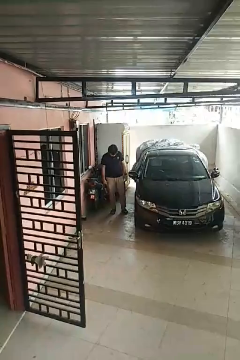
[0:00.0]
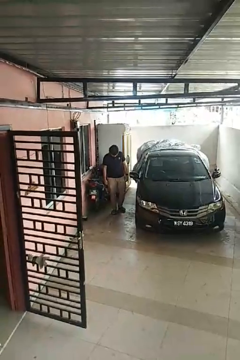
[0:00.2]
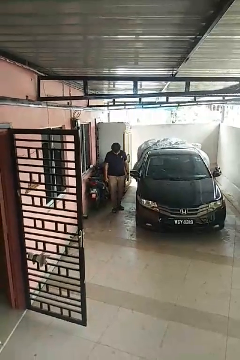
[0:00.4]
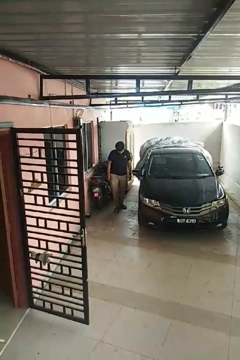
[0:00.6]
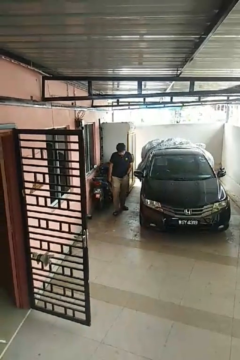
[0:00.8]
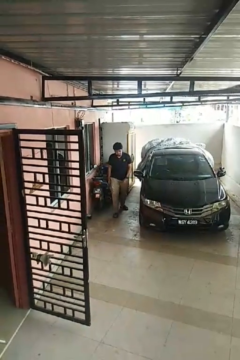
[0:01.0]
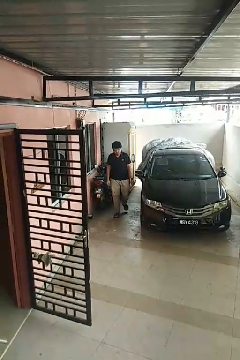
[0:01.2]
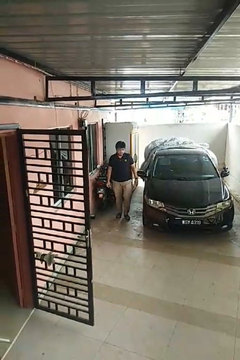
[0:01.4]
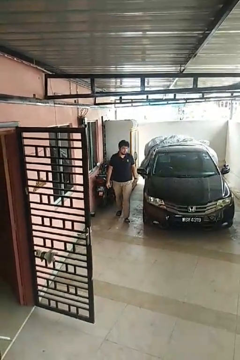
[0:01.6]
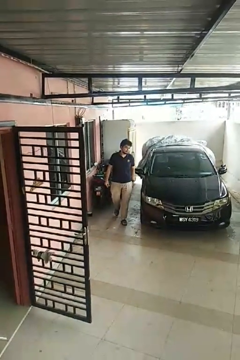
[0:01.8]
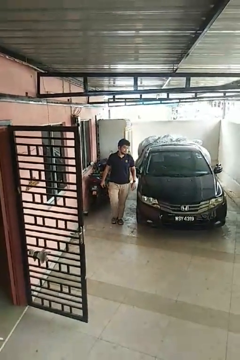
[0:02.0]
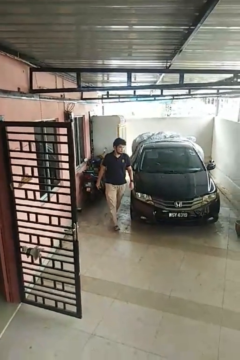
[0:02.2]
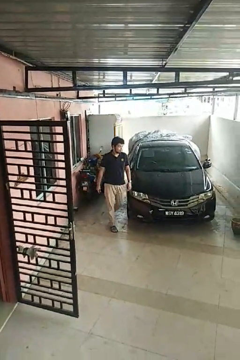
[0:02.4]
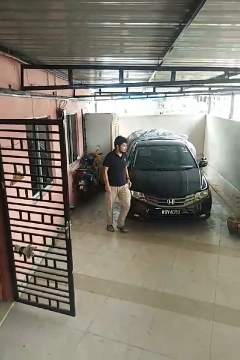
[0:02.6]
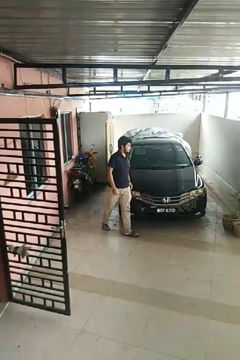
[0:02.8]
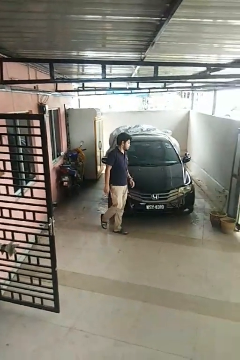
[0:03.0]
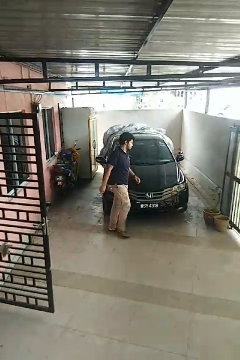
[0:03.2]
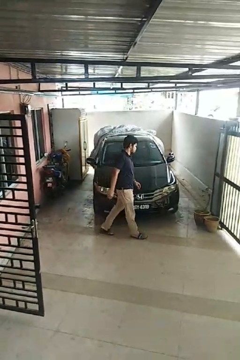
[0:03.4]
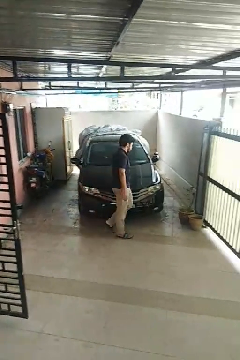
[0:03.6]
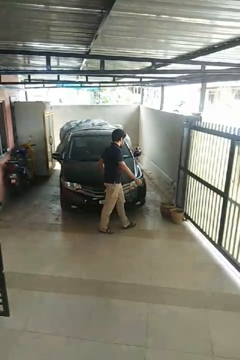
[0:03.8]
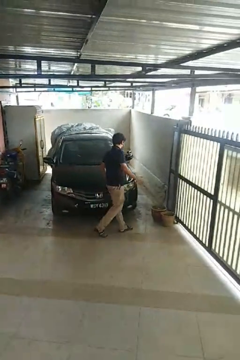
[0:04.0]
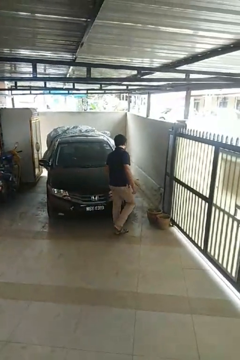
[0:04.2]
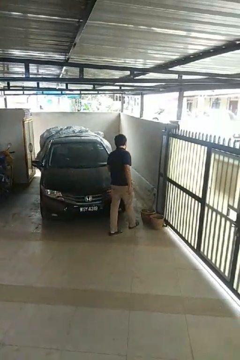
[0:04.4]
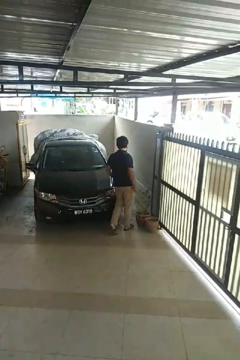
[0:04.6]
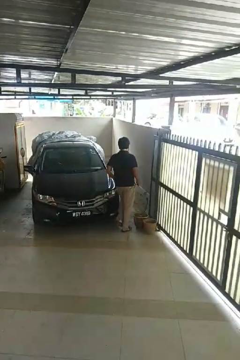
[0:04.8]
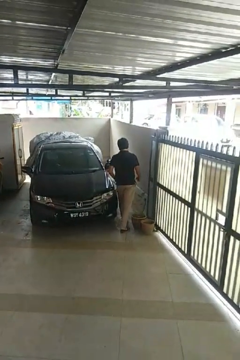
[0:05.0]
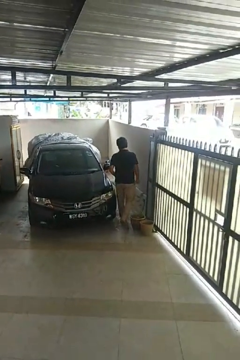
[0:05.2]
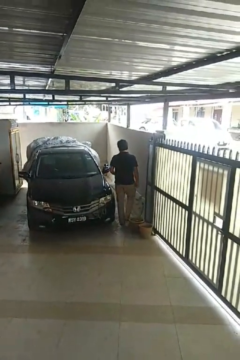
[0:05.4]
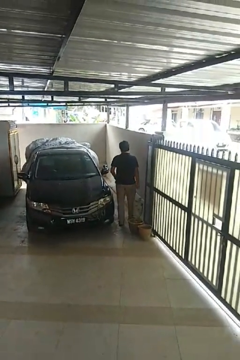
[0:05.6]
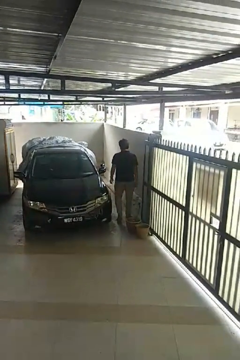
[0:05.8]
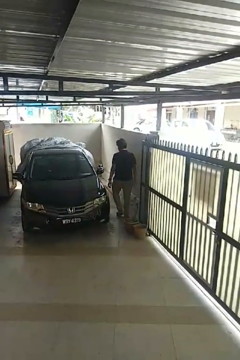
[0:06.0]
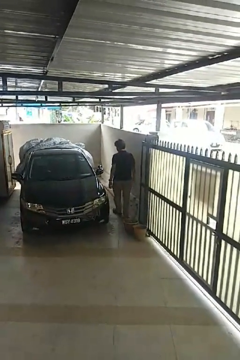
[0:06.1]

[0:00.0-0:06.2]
person walks around car

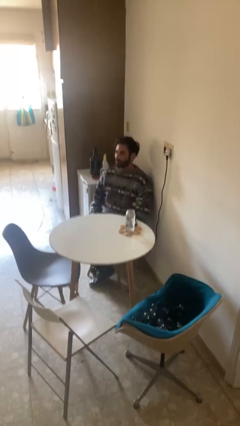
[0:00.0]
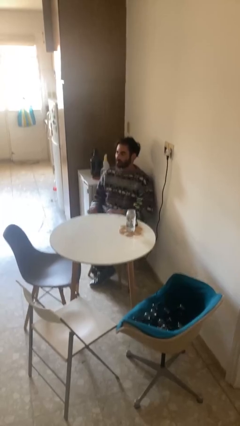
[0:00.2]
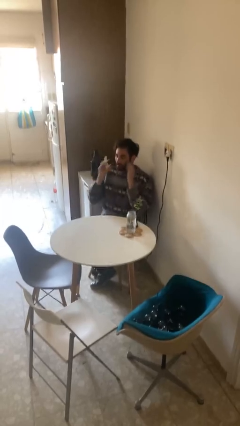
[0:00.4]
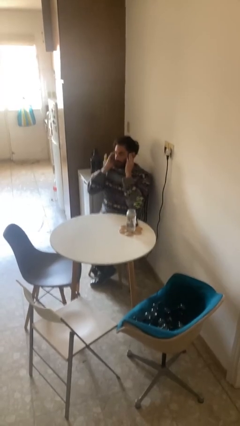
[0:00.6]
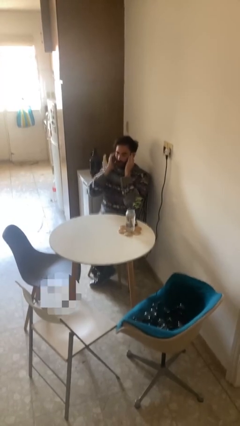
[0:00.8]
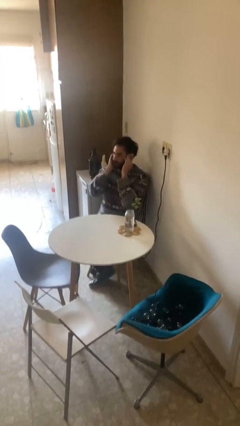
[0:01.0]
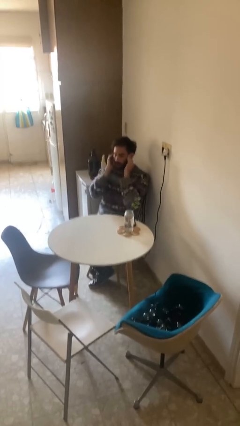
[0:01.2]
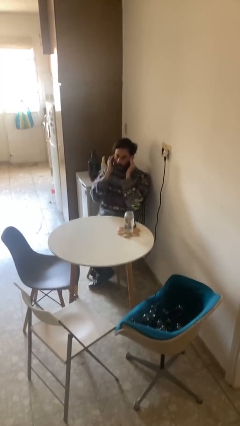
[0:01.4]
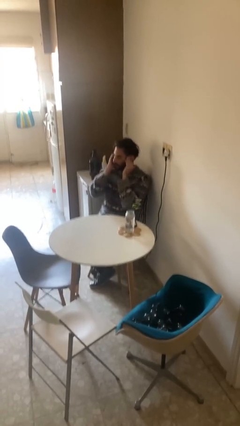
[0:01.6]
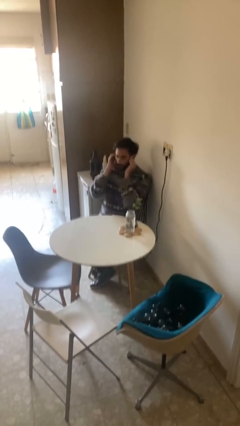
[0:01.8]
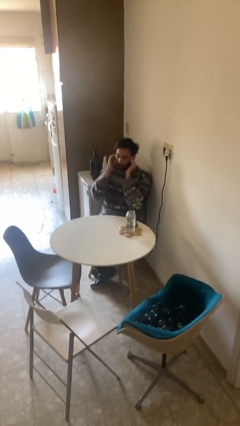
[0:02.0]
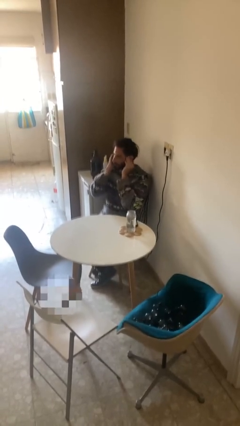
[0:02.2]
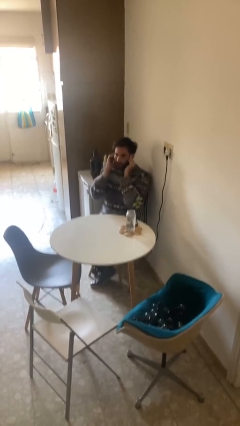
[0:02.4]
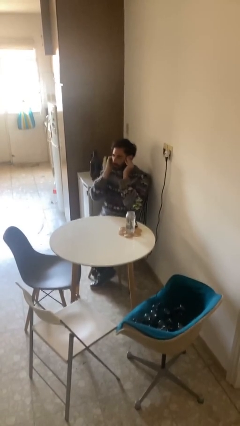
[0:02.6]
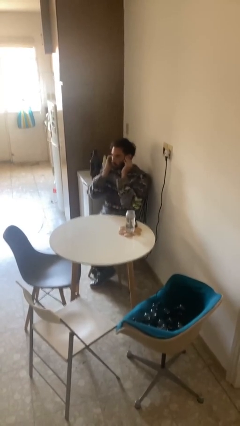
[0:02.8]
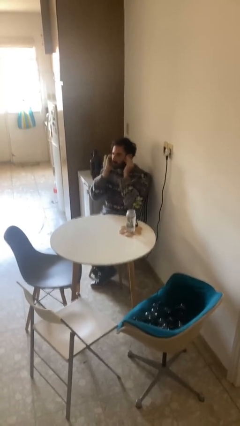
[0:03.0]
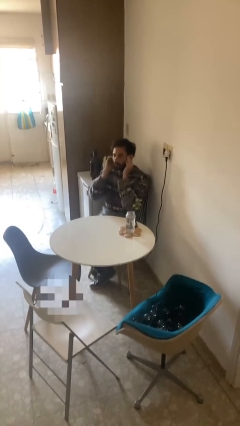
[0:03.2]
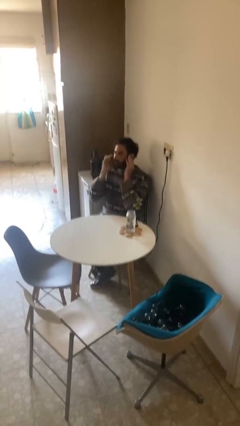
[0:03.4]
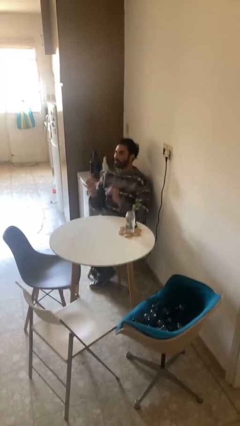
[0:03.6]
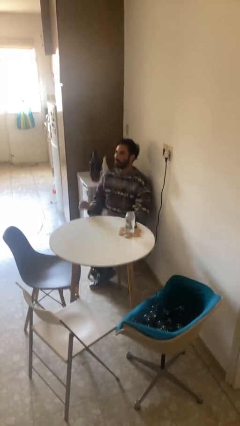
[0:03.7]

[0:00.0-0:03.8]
person puts fingers in ear

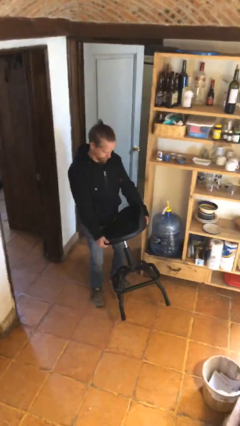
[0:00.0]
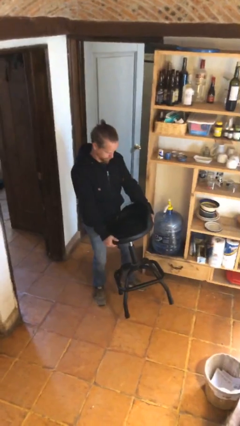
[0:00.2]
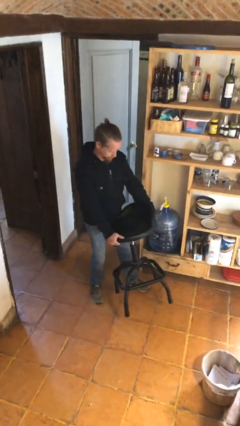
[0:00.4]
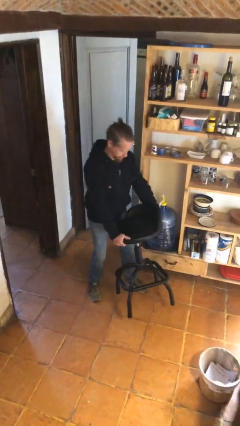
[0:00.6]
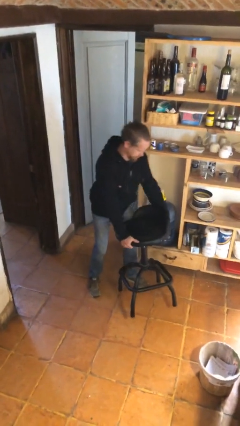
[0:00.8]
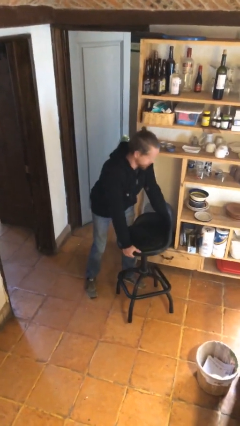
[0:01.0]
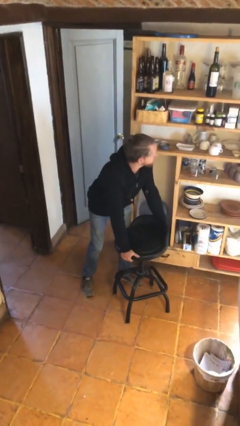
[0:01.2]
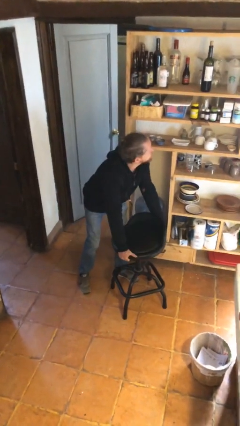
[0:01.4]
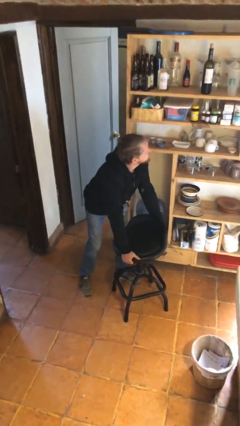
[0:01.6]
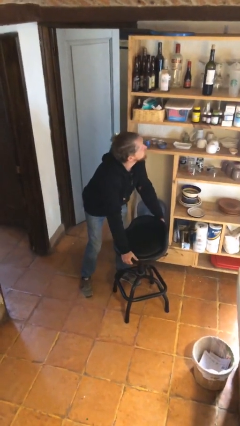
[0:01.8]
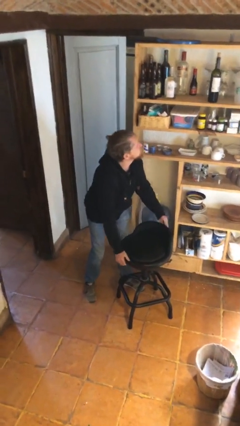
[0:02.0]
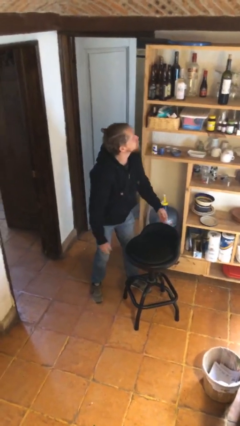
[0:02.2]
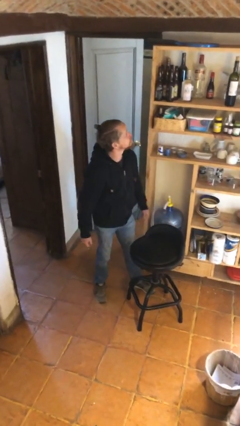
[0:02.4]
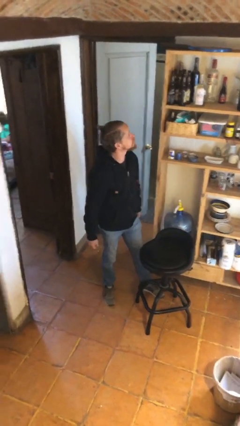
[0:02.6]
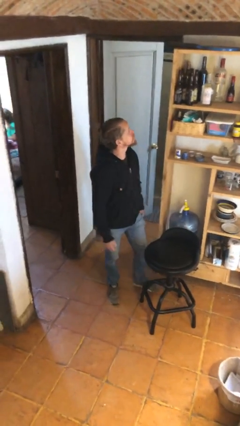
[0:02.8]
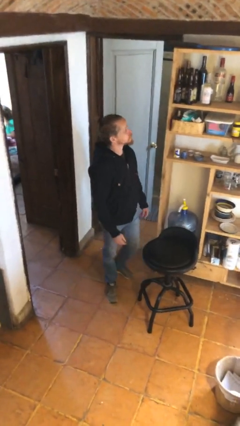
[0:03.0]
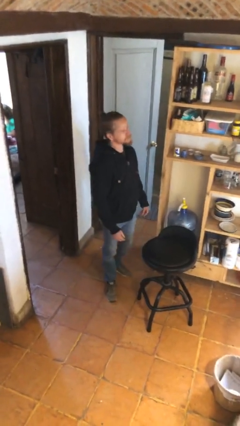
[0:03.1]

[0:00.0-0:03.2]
person puts down object on floor

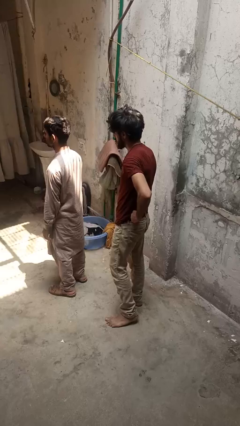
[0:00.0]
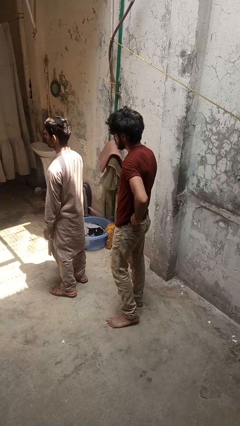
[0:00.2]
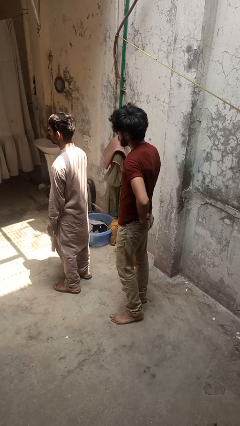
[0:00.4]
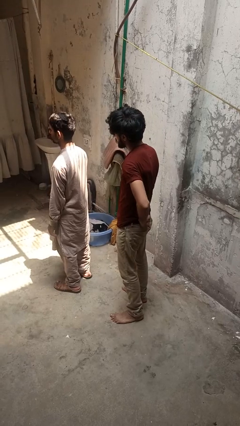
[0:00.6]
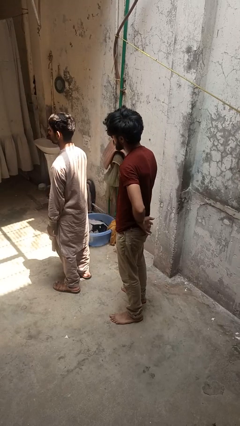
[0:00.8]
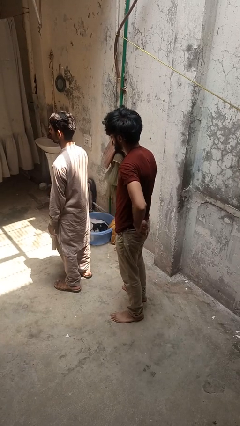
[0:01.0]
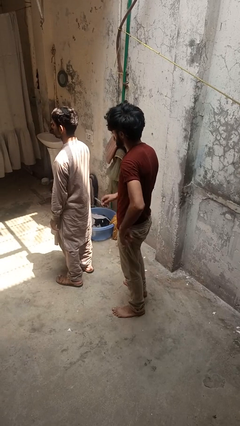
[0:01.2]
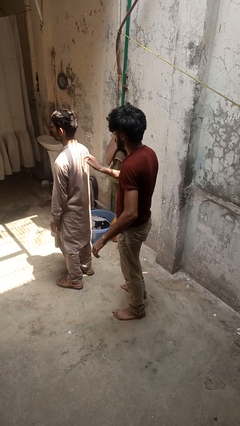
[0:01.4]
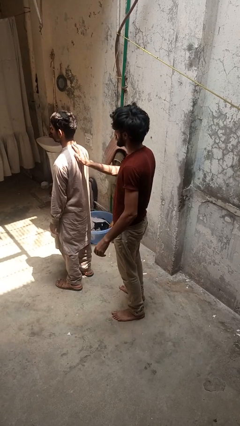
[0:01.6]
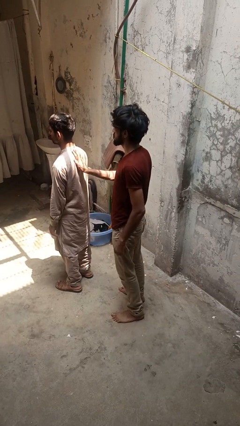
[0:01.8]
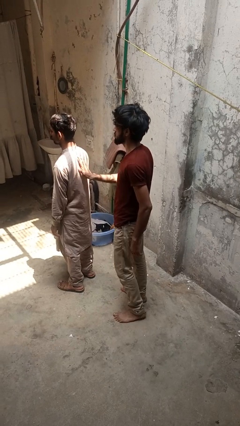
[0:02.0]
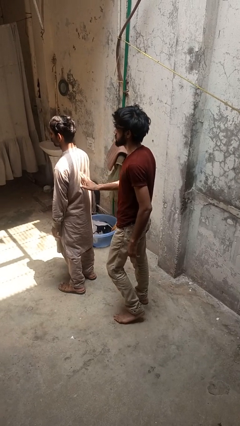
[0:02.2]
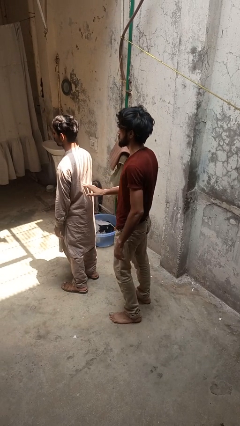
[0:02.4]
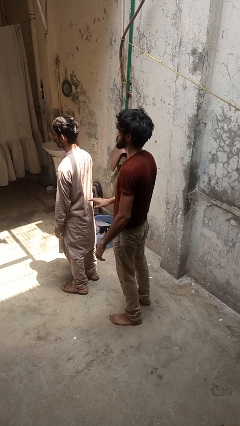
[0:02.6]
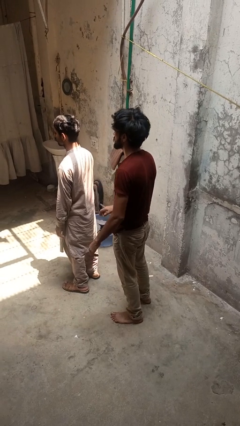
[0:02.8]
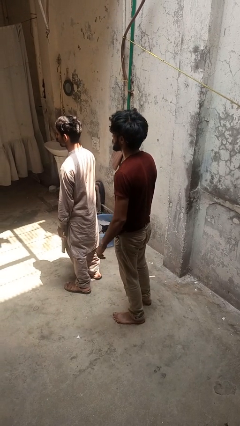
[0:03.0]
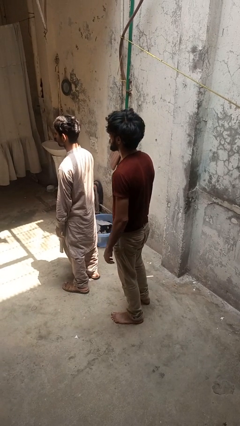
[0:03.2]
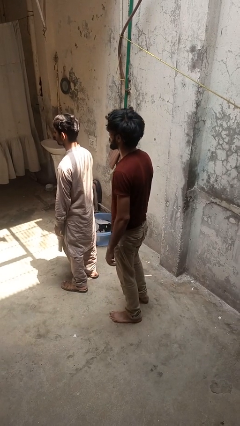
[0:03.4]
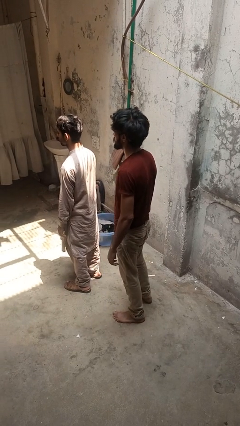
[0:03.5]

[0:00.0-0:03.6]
person touches back of person

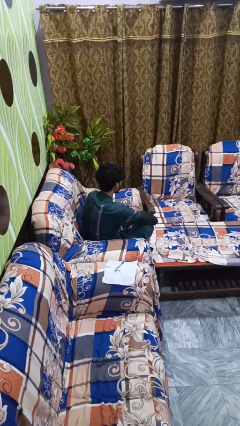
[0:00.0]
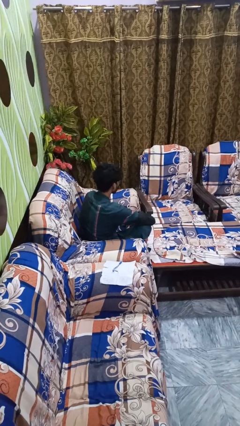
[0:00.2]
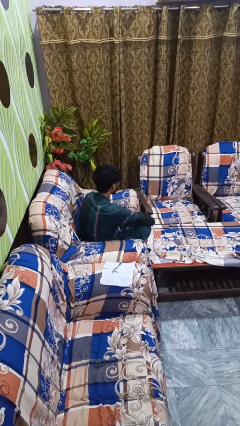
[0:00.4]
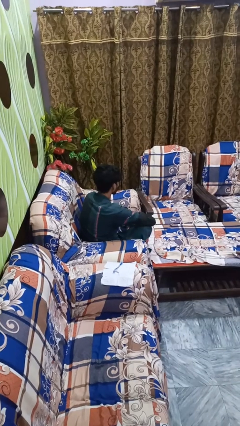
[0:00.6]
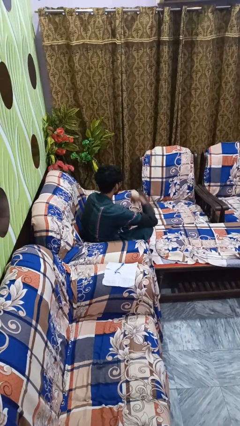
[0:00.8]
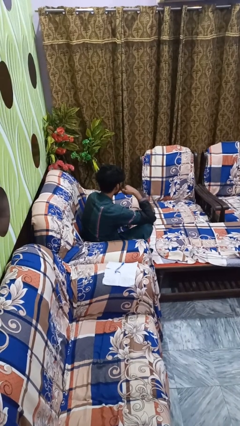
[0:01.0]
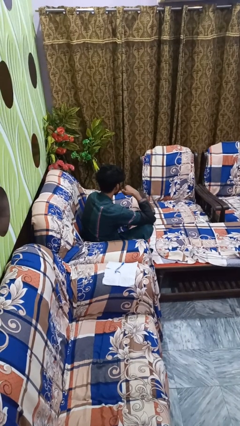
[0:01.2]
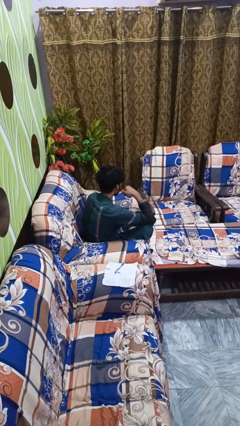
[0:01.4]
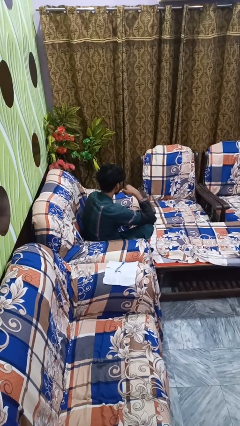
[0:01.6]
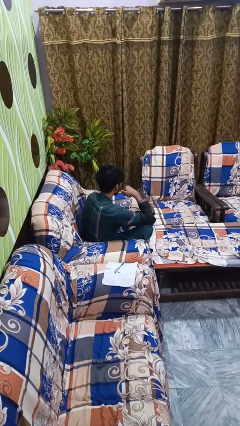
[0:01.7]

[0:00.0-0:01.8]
person gestures call me
